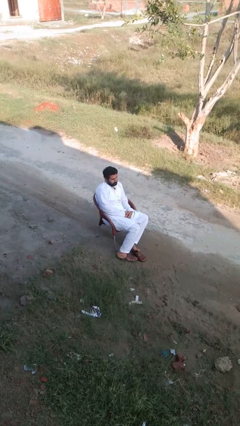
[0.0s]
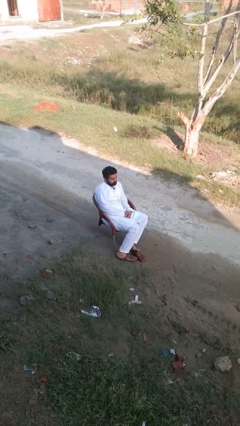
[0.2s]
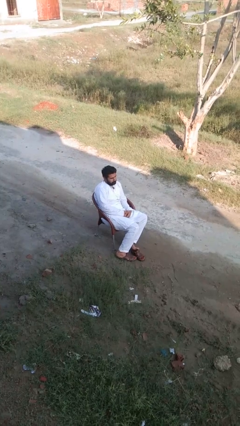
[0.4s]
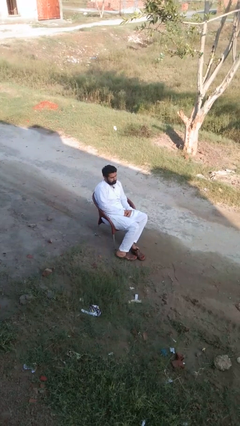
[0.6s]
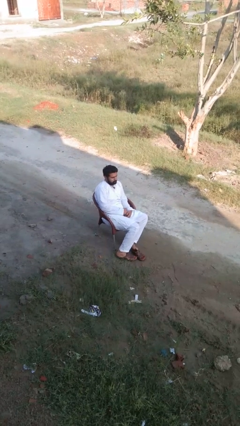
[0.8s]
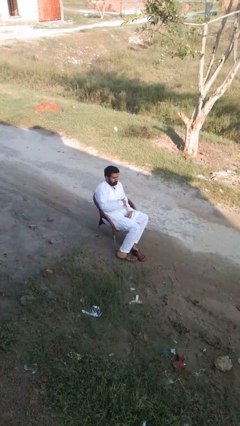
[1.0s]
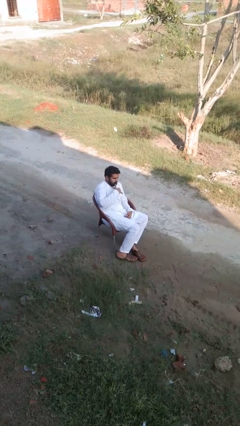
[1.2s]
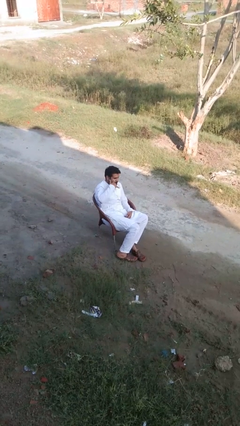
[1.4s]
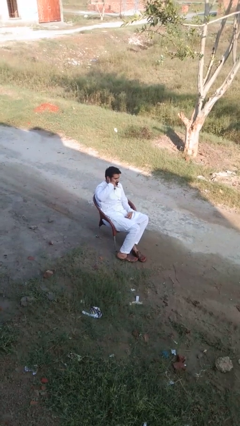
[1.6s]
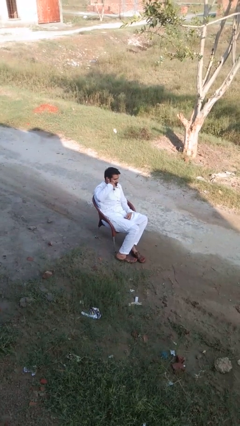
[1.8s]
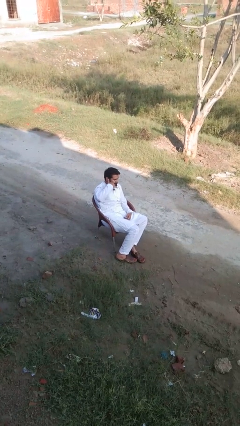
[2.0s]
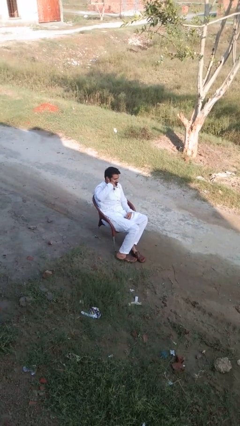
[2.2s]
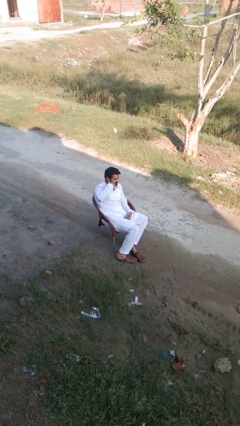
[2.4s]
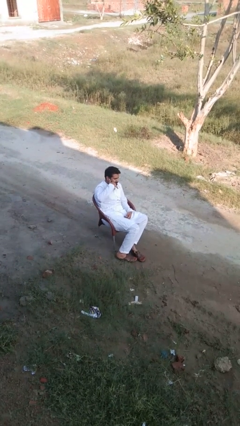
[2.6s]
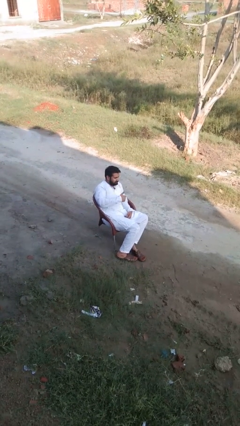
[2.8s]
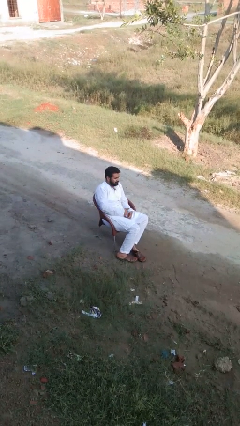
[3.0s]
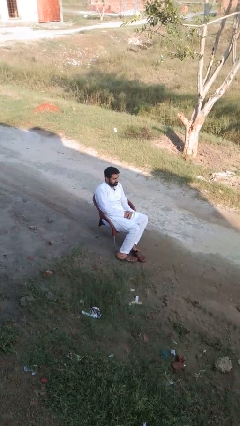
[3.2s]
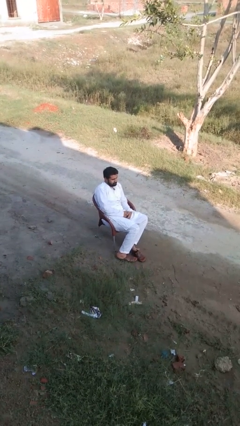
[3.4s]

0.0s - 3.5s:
person gestures call me

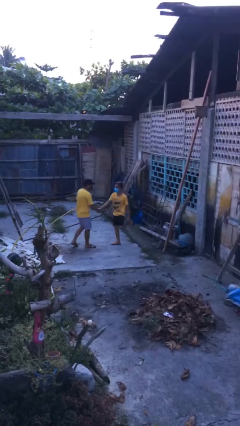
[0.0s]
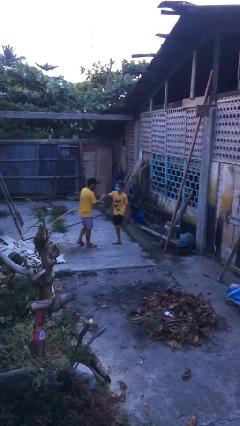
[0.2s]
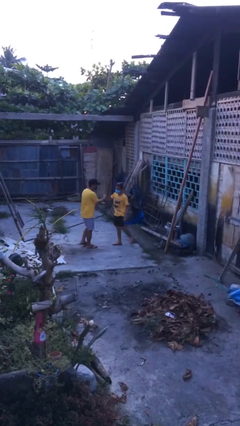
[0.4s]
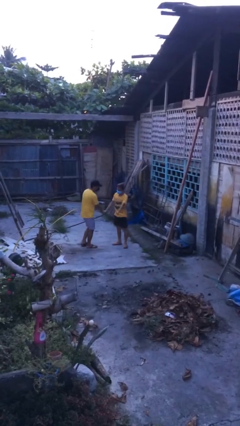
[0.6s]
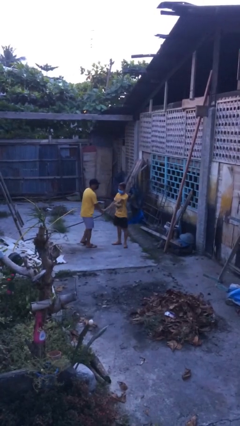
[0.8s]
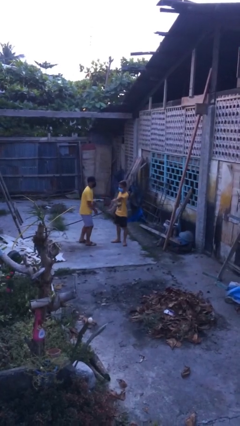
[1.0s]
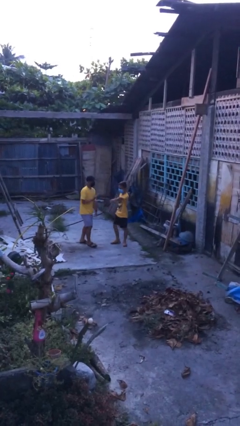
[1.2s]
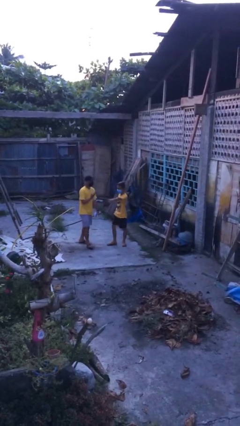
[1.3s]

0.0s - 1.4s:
person shakes hand

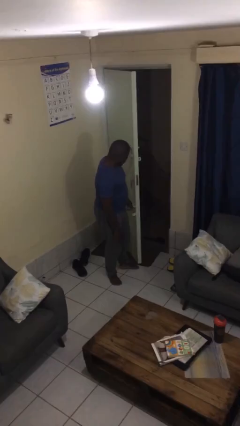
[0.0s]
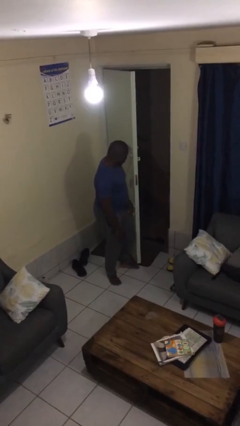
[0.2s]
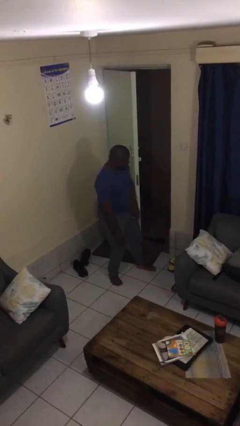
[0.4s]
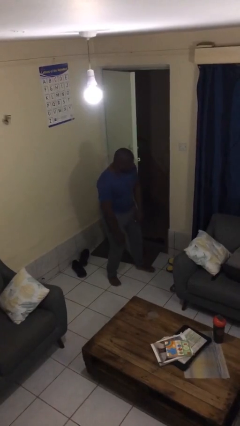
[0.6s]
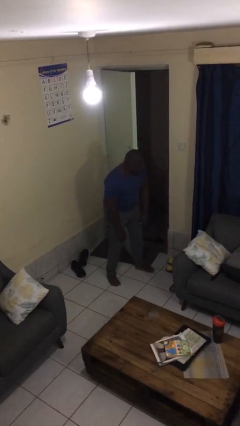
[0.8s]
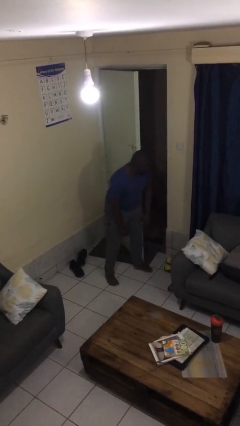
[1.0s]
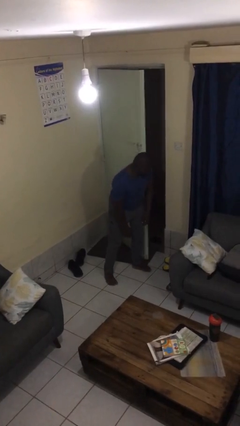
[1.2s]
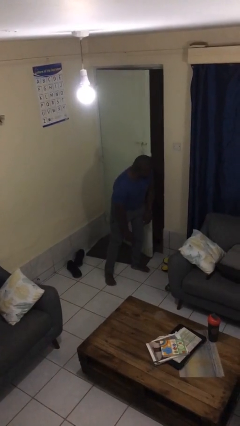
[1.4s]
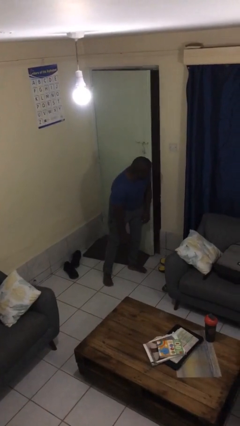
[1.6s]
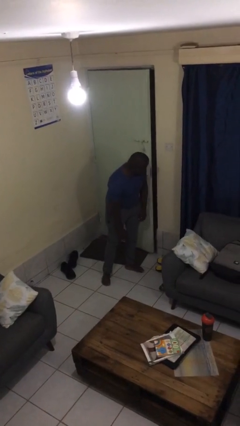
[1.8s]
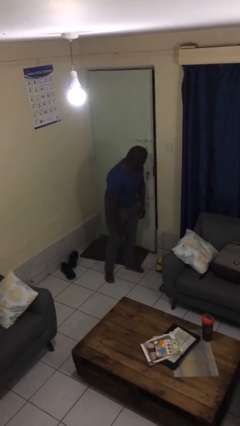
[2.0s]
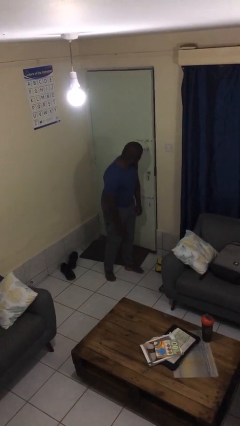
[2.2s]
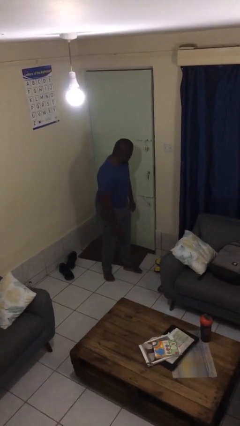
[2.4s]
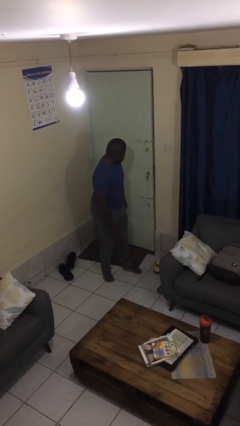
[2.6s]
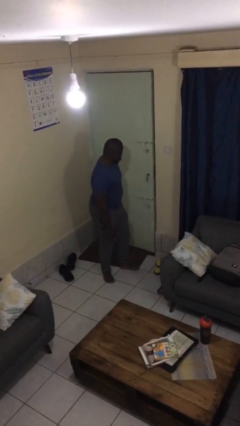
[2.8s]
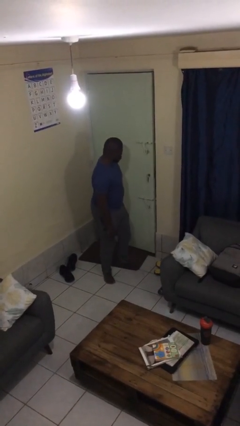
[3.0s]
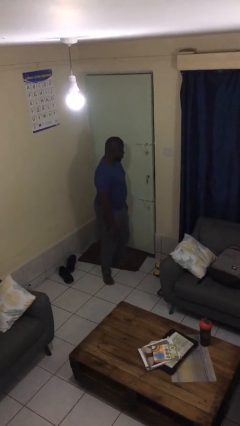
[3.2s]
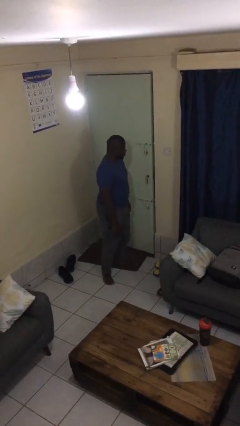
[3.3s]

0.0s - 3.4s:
person closes door with hip

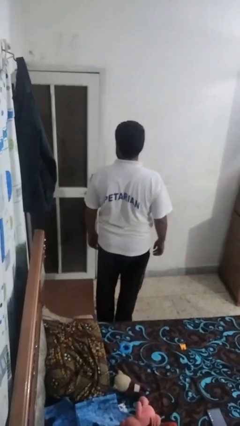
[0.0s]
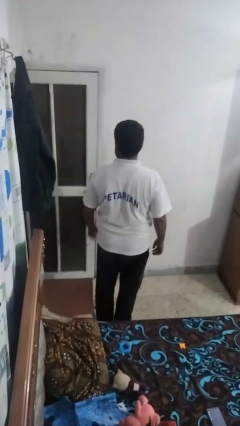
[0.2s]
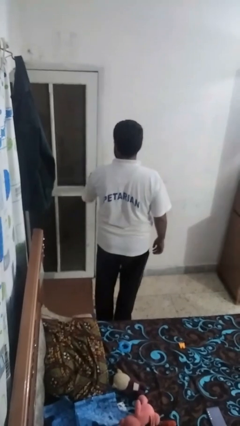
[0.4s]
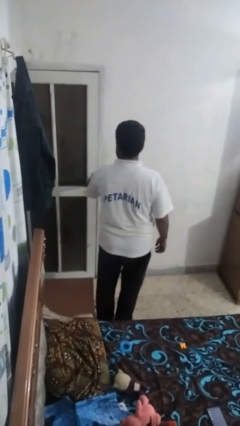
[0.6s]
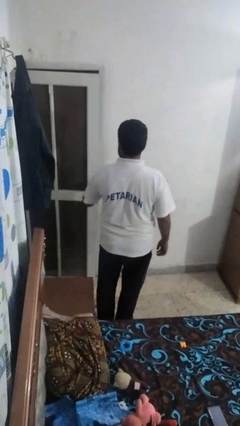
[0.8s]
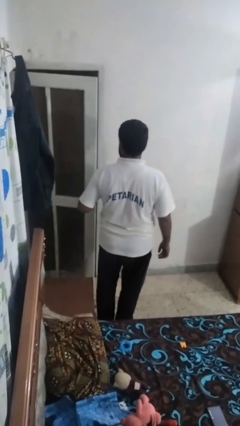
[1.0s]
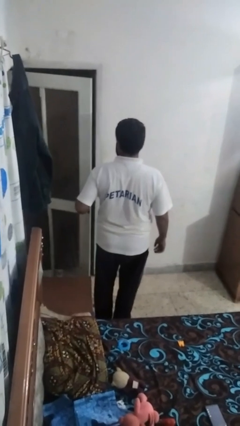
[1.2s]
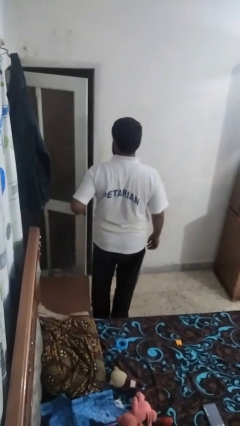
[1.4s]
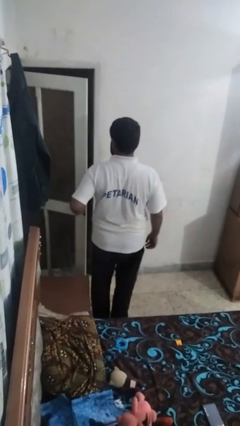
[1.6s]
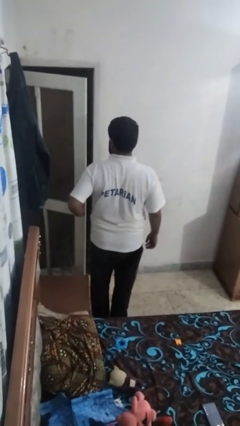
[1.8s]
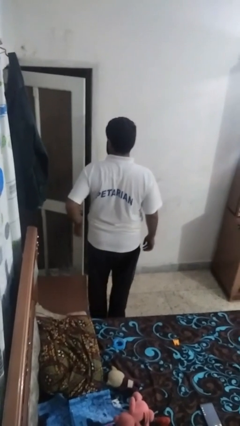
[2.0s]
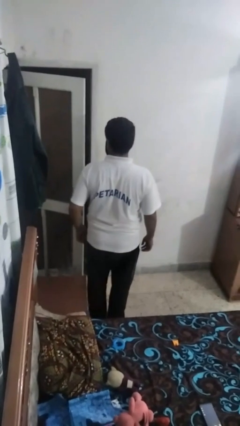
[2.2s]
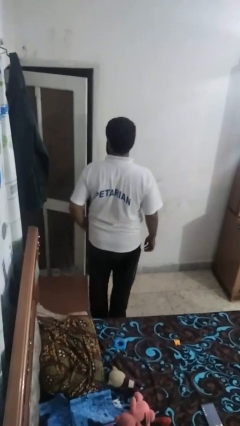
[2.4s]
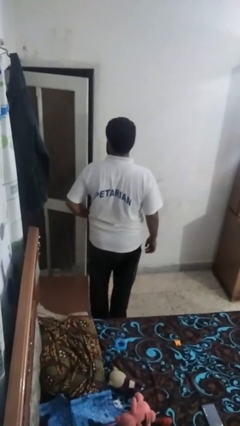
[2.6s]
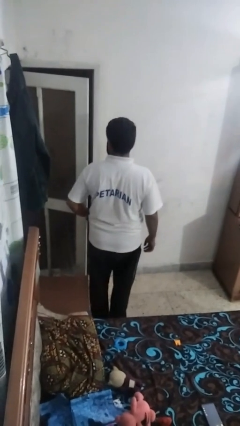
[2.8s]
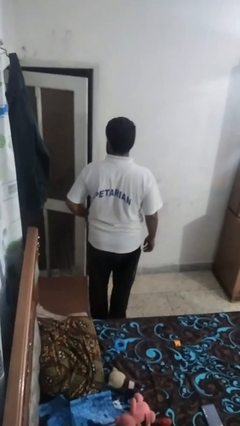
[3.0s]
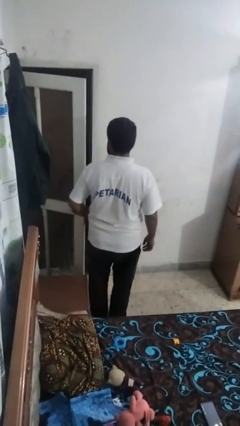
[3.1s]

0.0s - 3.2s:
person opens facility door

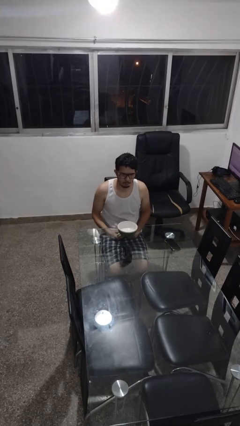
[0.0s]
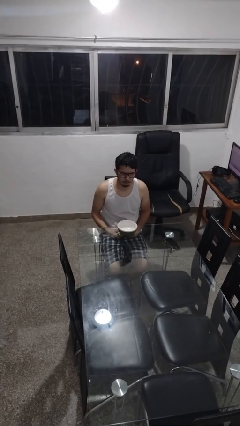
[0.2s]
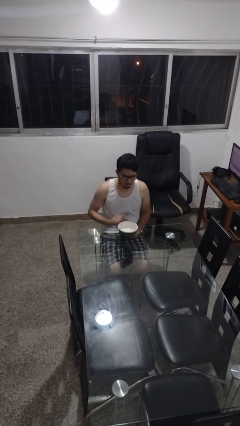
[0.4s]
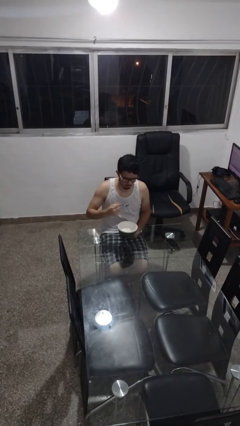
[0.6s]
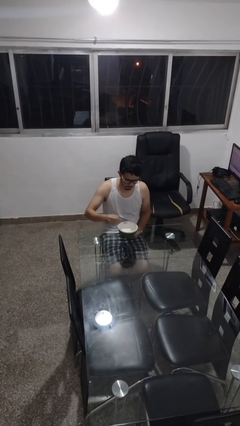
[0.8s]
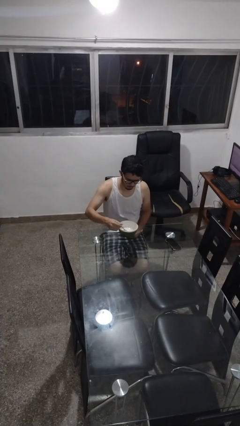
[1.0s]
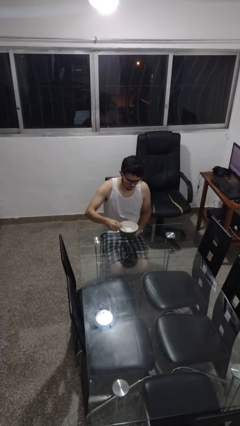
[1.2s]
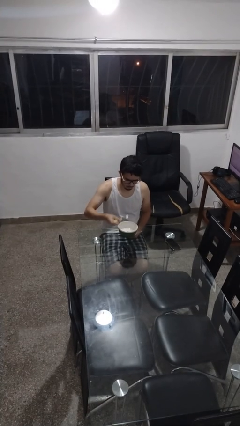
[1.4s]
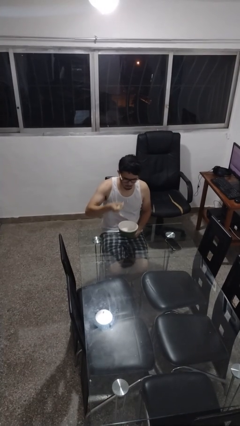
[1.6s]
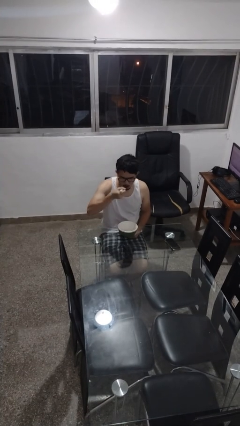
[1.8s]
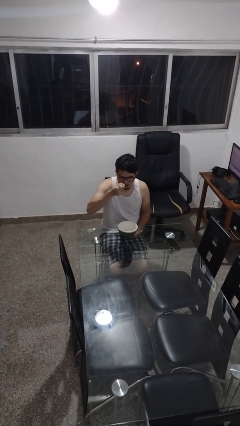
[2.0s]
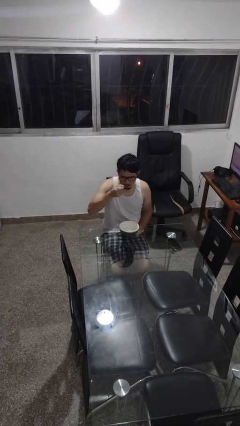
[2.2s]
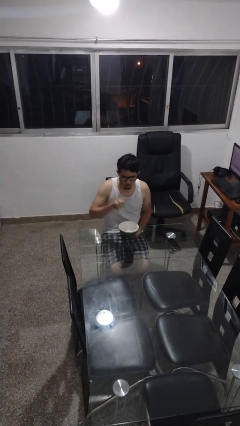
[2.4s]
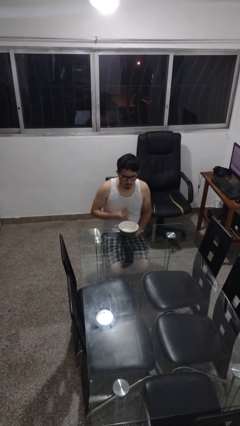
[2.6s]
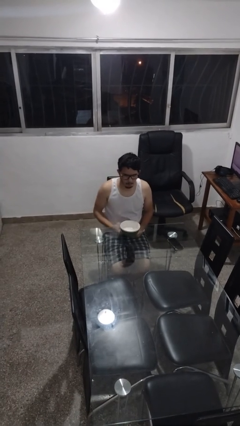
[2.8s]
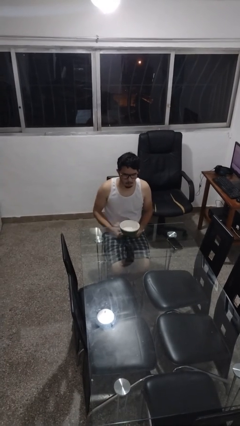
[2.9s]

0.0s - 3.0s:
person eats with utensil

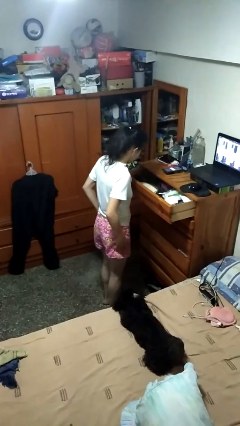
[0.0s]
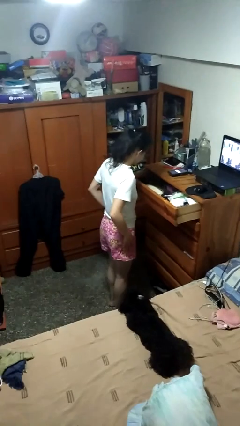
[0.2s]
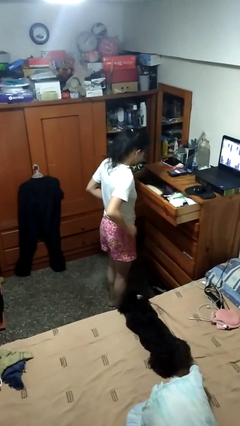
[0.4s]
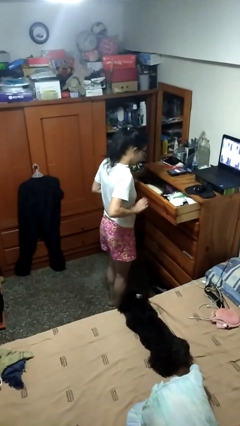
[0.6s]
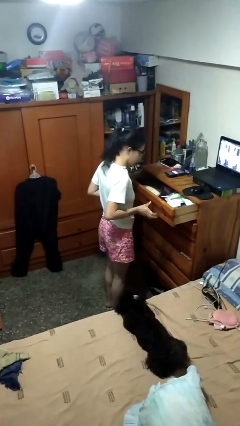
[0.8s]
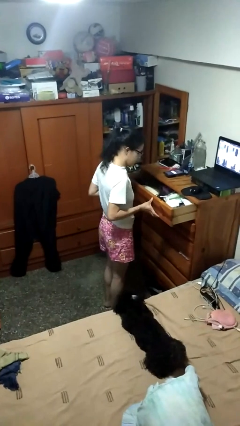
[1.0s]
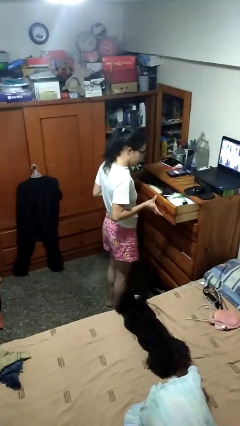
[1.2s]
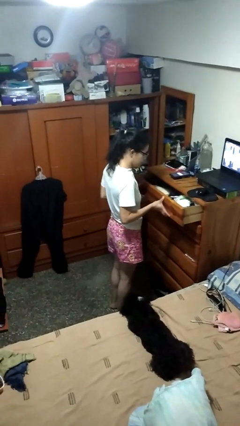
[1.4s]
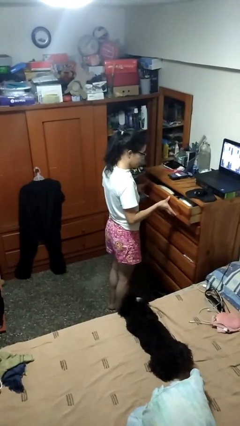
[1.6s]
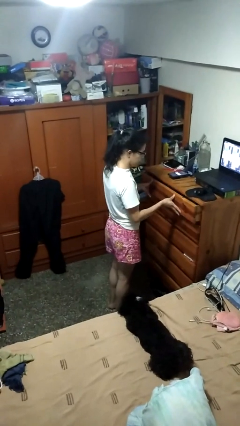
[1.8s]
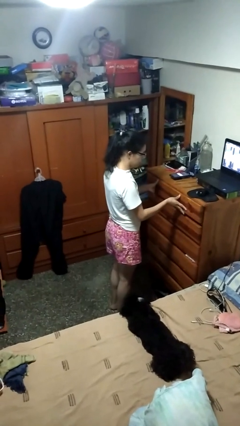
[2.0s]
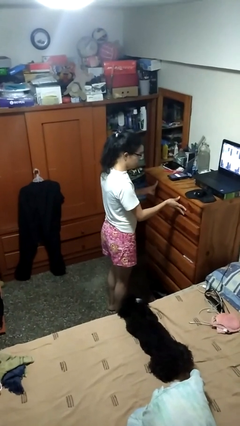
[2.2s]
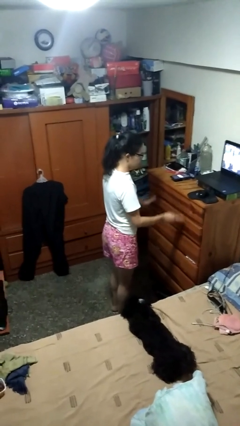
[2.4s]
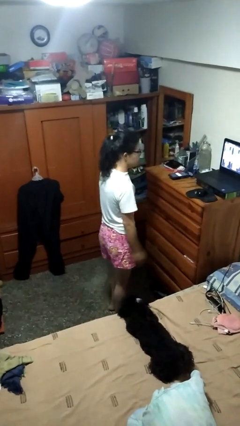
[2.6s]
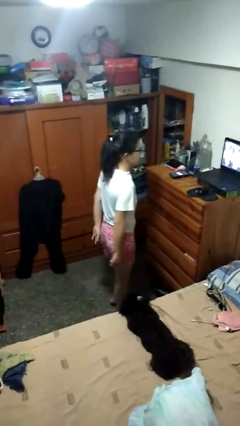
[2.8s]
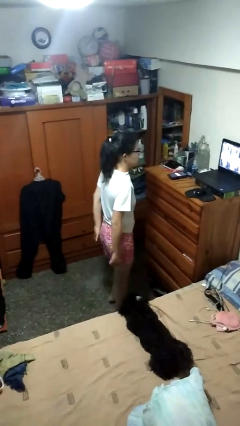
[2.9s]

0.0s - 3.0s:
person closes dresser drawer

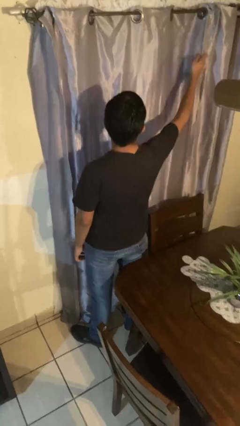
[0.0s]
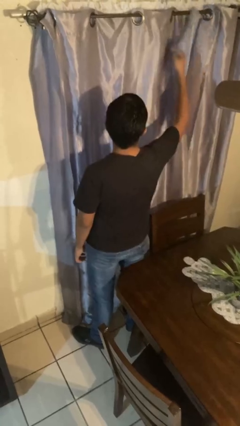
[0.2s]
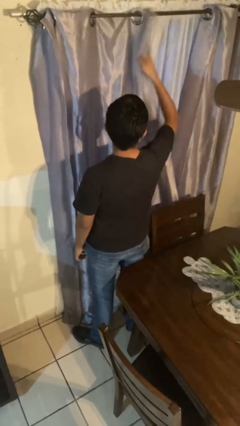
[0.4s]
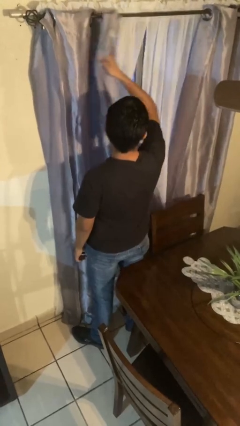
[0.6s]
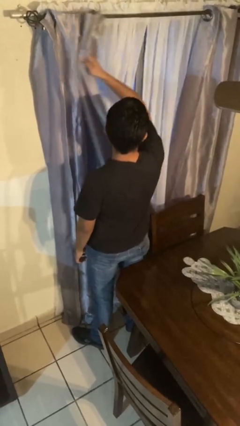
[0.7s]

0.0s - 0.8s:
person opens curtains
